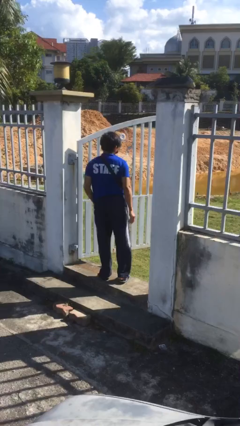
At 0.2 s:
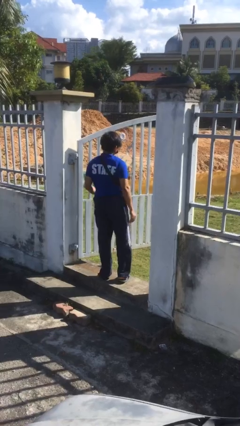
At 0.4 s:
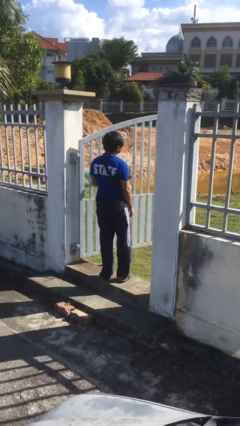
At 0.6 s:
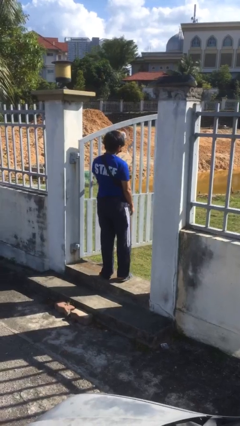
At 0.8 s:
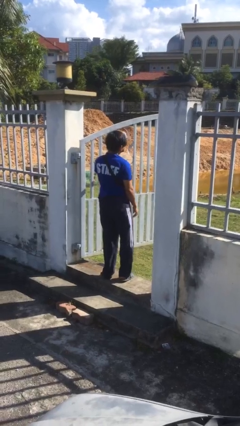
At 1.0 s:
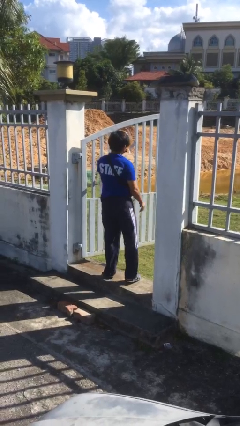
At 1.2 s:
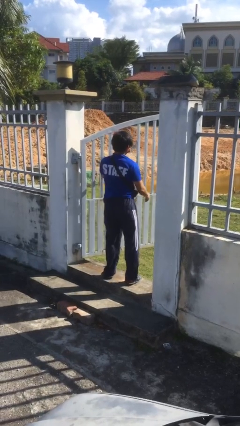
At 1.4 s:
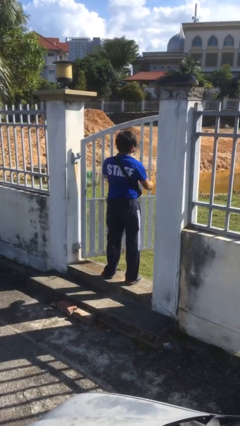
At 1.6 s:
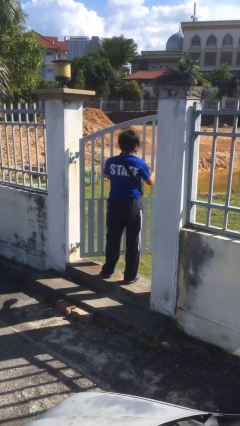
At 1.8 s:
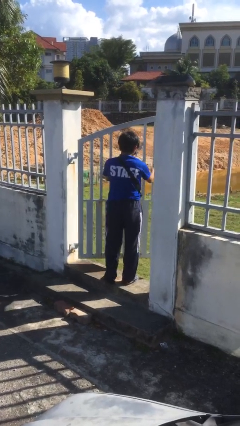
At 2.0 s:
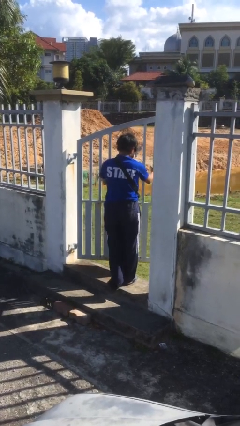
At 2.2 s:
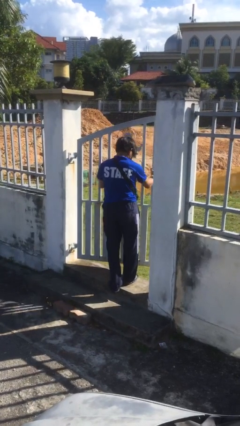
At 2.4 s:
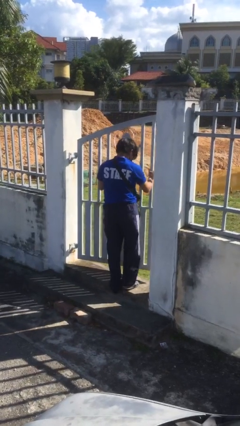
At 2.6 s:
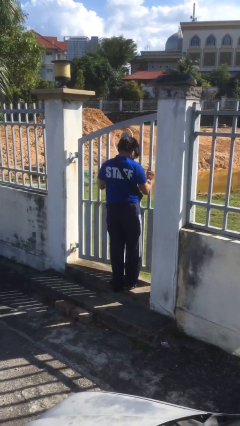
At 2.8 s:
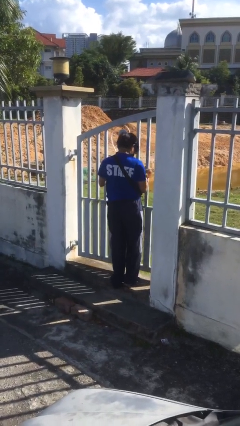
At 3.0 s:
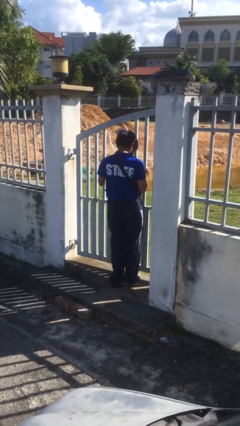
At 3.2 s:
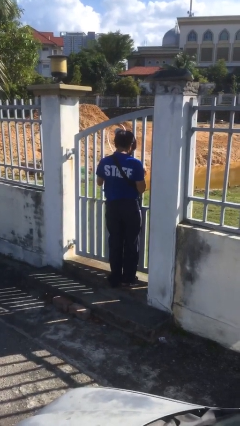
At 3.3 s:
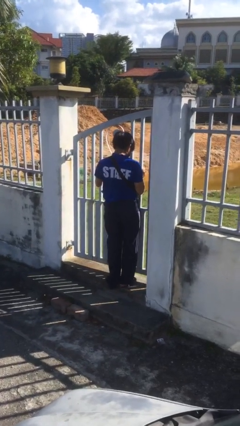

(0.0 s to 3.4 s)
person closes facility door

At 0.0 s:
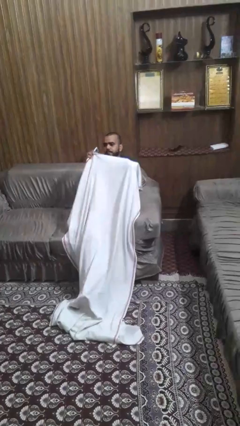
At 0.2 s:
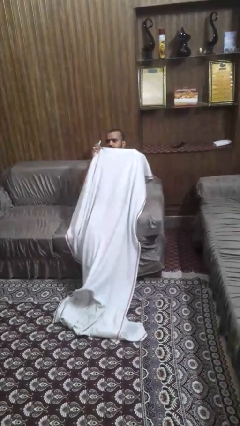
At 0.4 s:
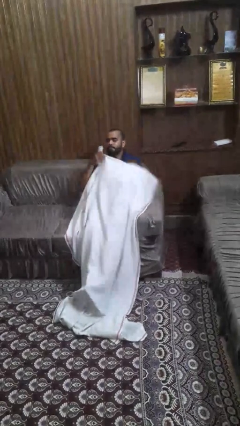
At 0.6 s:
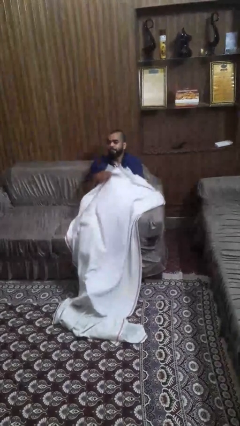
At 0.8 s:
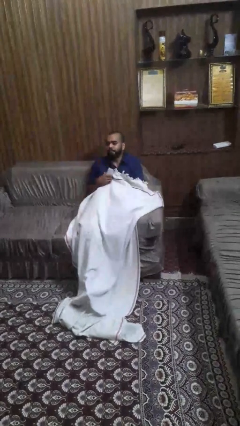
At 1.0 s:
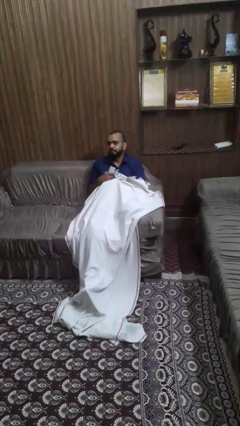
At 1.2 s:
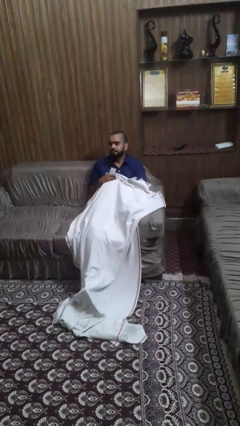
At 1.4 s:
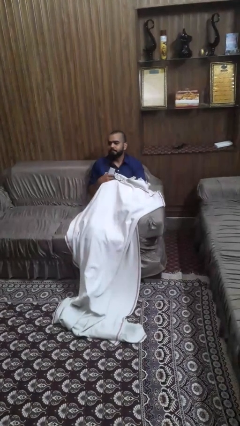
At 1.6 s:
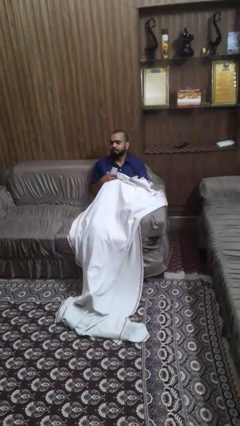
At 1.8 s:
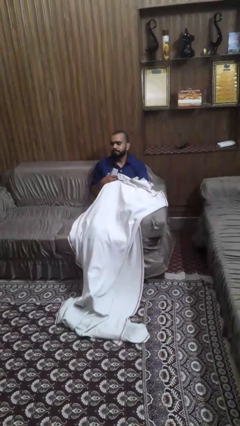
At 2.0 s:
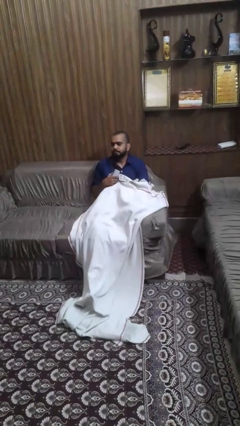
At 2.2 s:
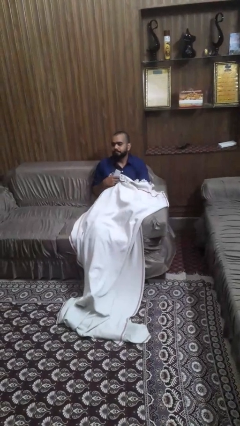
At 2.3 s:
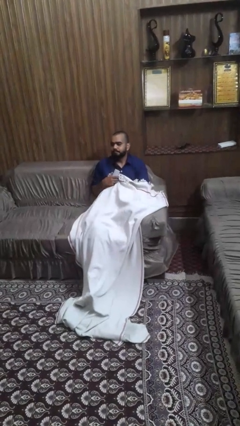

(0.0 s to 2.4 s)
person covers with blanket

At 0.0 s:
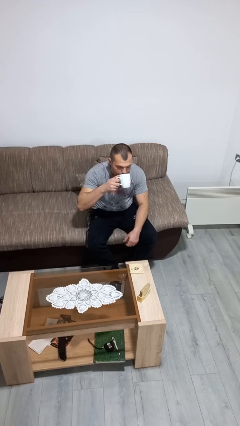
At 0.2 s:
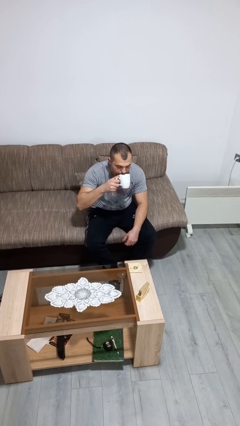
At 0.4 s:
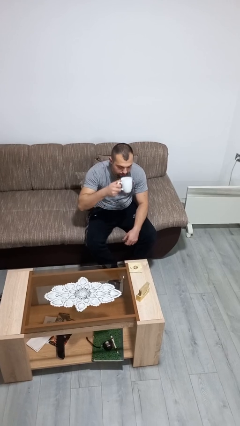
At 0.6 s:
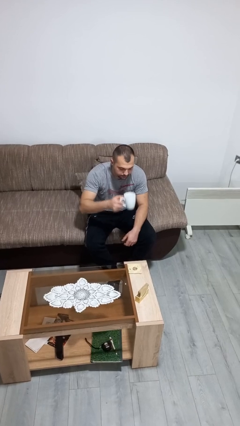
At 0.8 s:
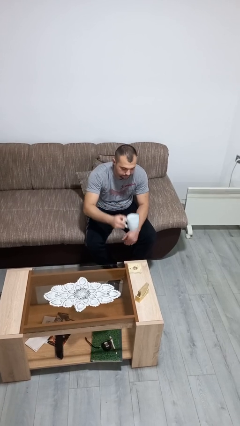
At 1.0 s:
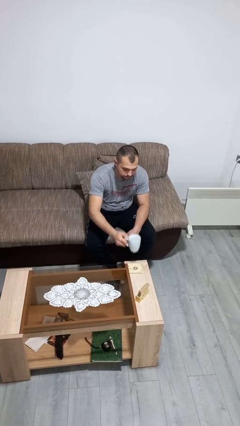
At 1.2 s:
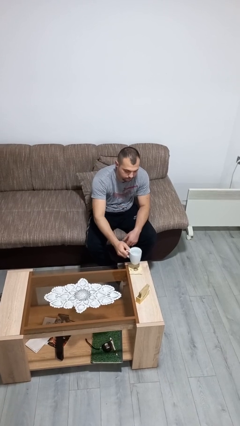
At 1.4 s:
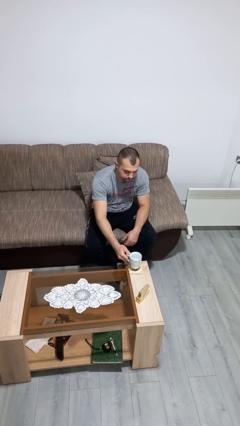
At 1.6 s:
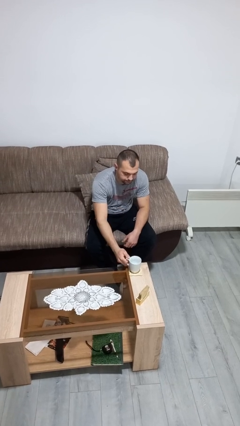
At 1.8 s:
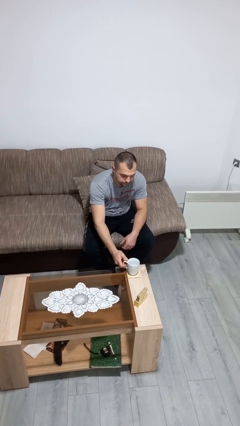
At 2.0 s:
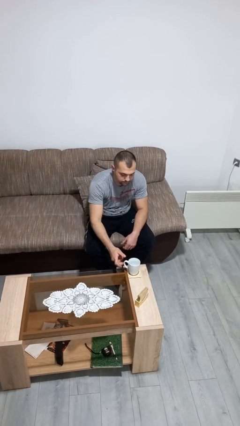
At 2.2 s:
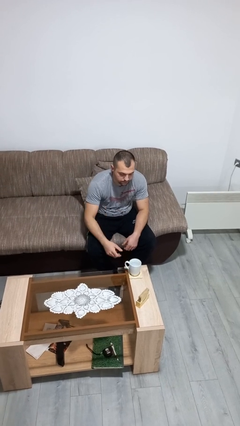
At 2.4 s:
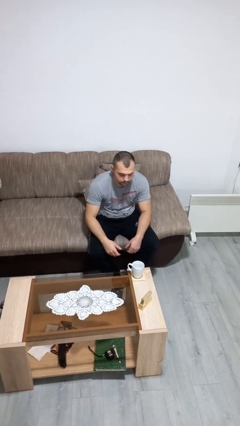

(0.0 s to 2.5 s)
person puts down object on table

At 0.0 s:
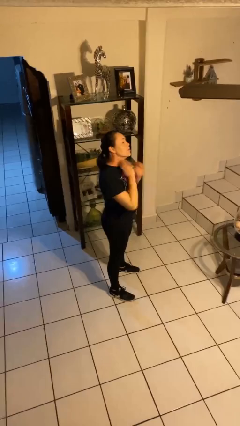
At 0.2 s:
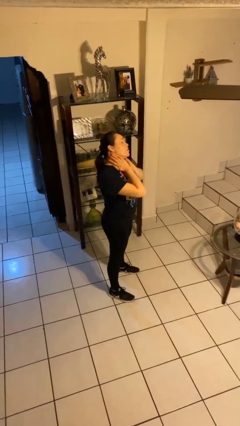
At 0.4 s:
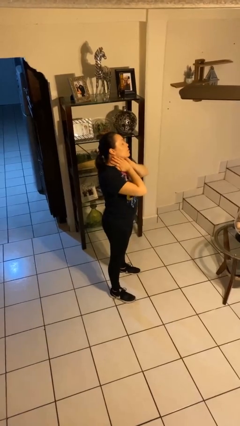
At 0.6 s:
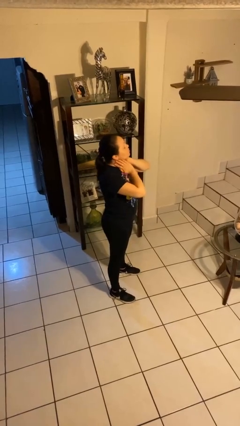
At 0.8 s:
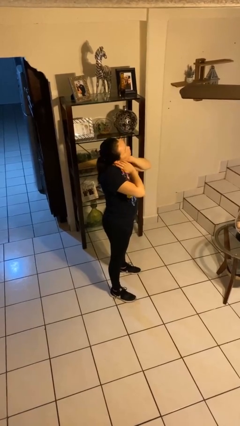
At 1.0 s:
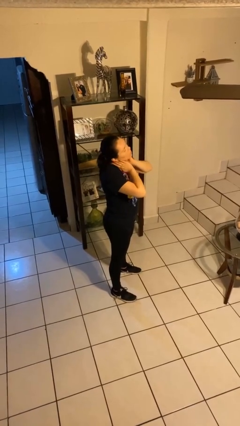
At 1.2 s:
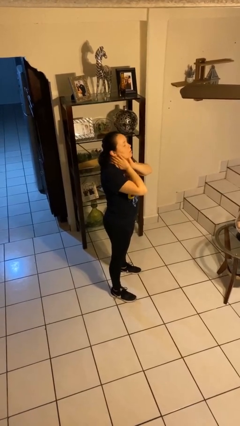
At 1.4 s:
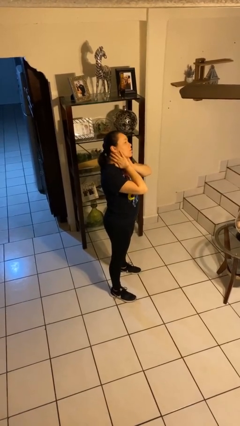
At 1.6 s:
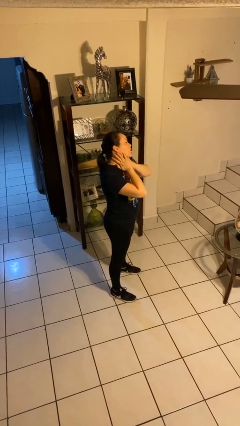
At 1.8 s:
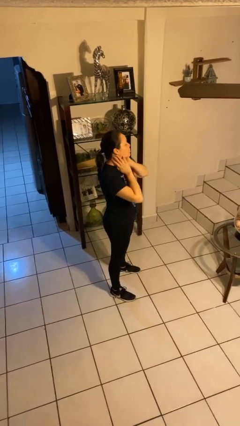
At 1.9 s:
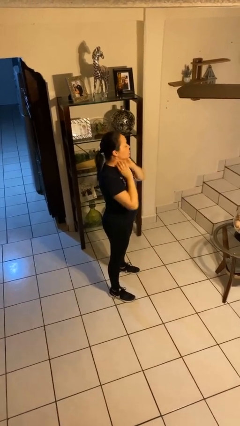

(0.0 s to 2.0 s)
person rubs neck

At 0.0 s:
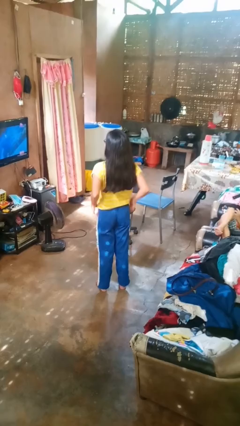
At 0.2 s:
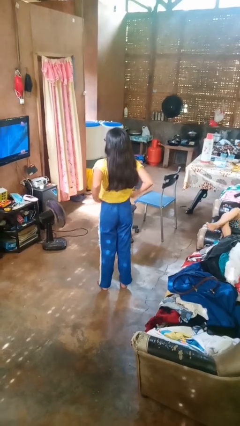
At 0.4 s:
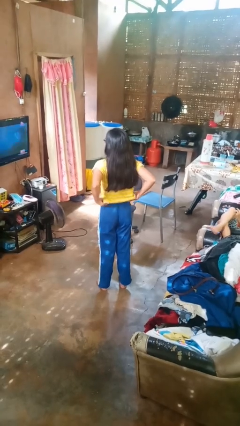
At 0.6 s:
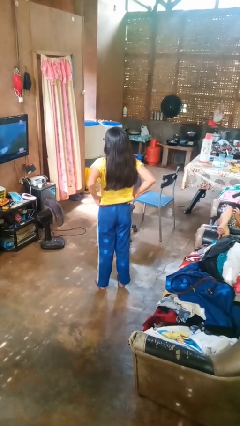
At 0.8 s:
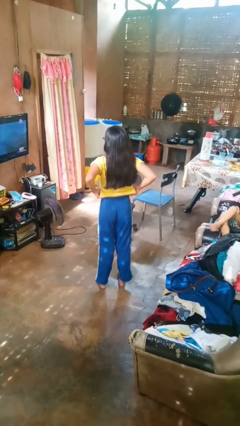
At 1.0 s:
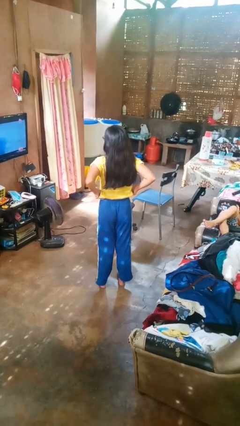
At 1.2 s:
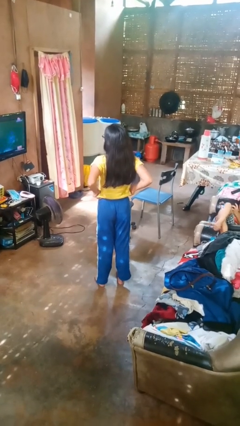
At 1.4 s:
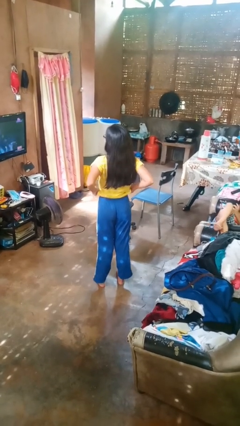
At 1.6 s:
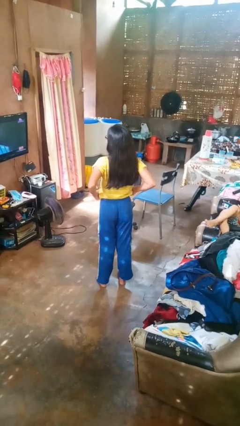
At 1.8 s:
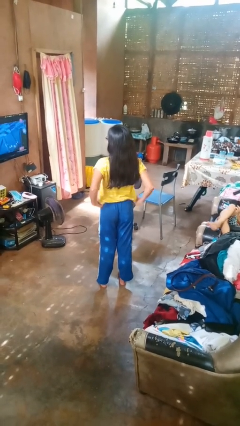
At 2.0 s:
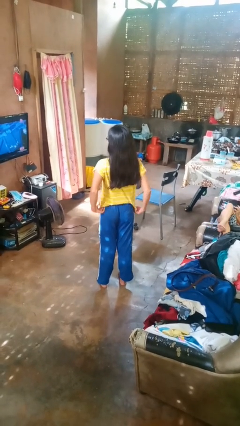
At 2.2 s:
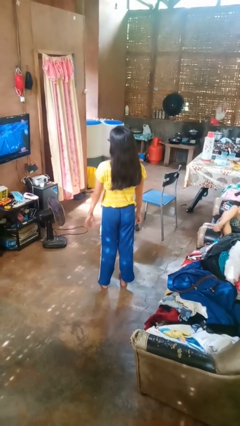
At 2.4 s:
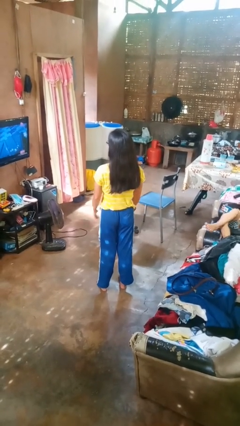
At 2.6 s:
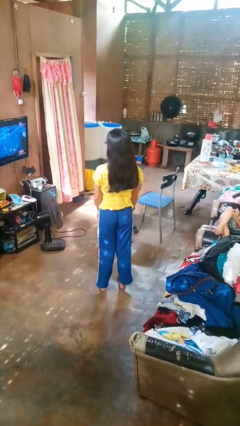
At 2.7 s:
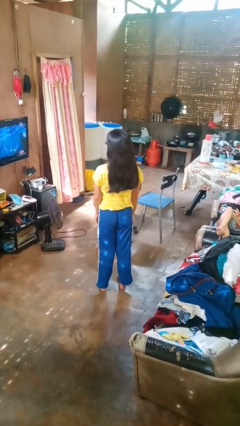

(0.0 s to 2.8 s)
person hikes up pants

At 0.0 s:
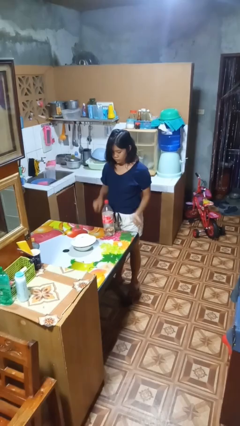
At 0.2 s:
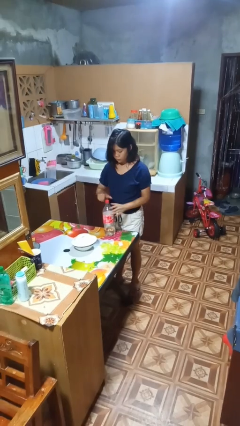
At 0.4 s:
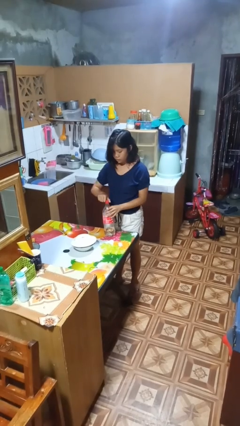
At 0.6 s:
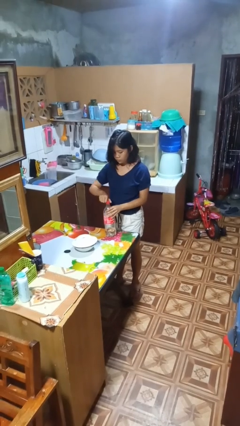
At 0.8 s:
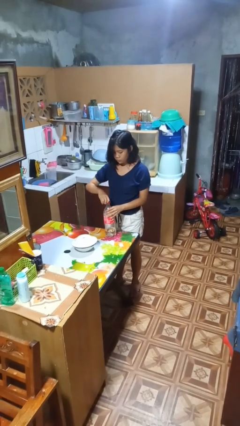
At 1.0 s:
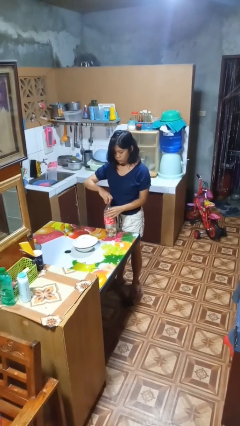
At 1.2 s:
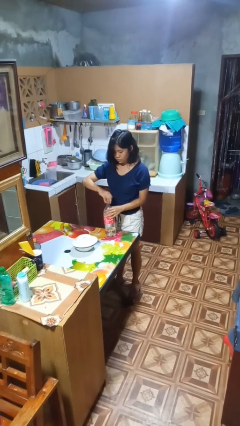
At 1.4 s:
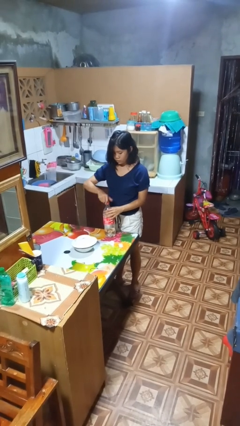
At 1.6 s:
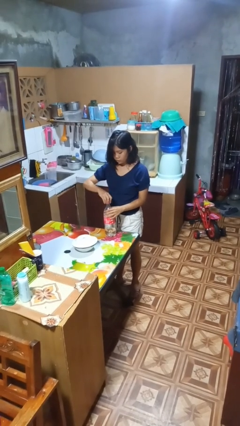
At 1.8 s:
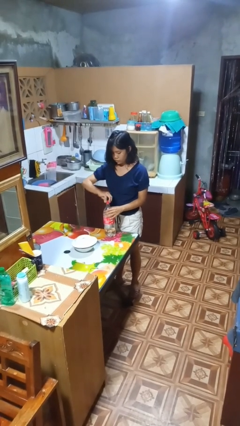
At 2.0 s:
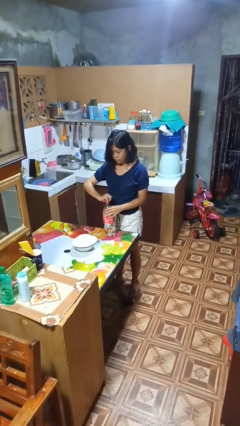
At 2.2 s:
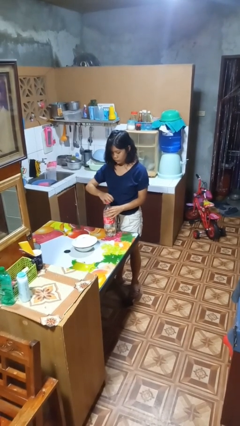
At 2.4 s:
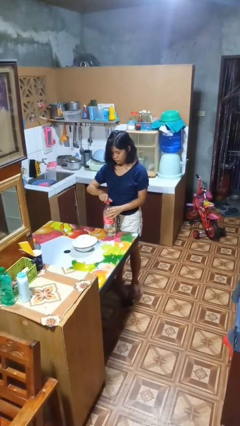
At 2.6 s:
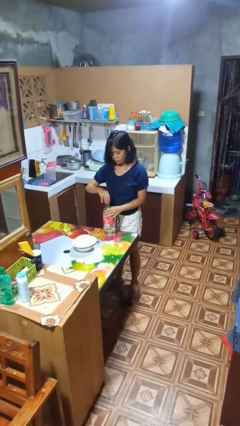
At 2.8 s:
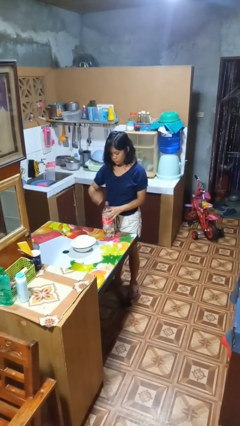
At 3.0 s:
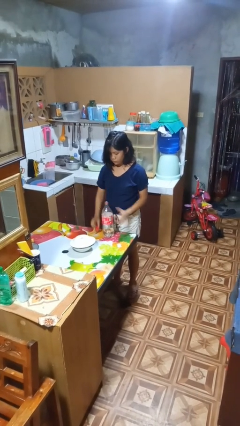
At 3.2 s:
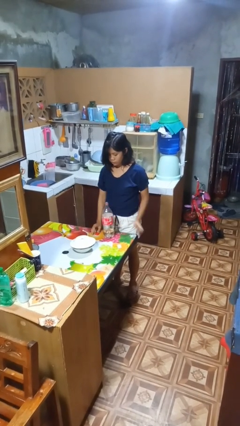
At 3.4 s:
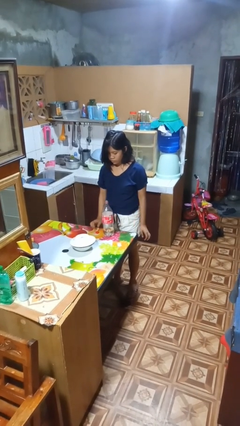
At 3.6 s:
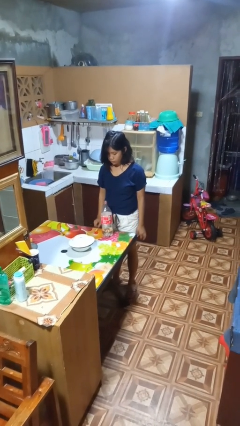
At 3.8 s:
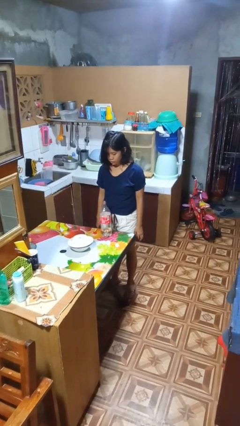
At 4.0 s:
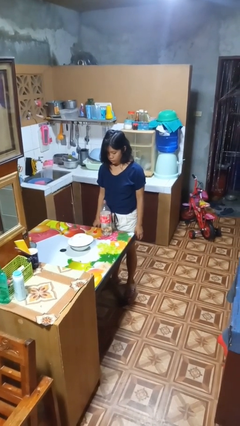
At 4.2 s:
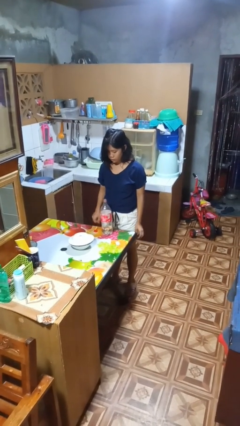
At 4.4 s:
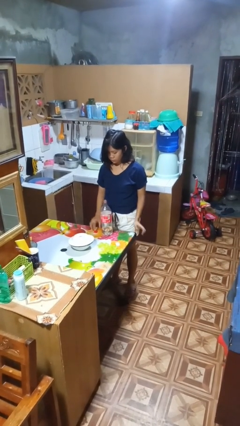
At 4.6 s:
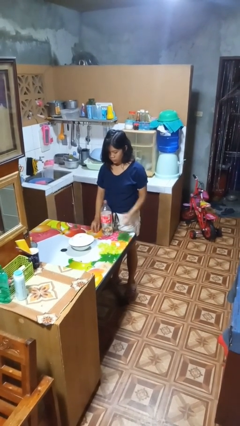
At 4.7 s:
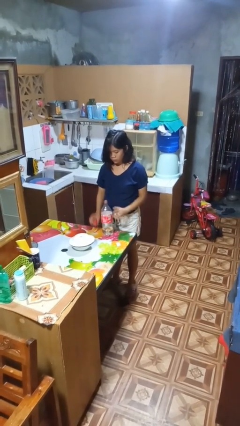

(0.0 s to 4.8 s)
person unscrews lid from bottle
